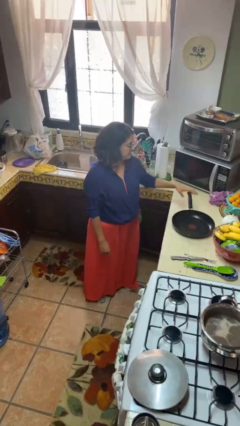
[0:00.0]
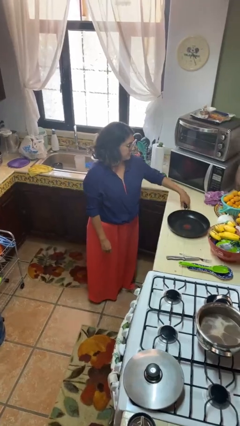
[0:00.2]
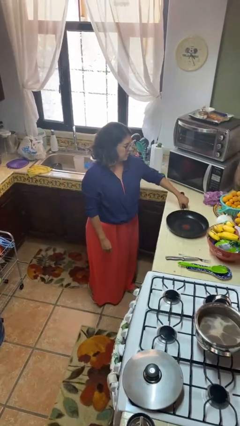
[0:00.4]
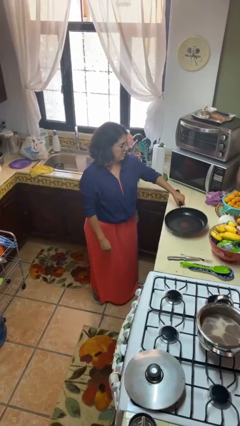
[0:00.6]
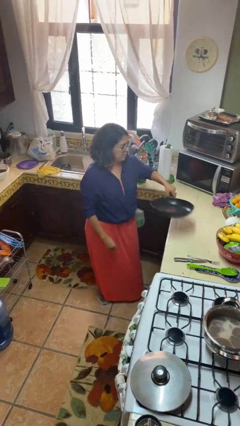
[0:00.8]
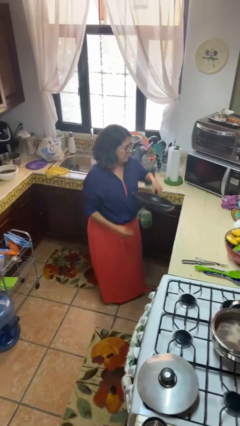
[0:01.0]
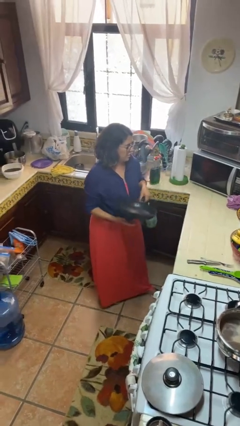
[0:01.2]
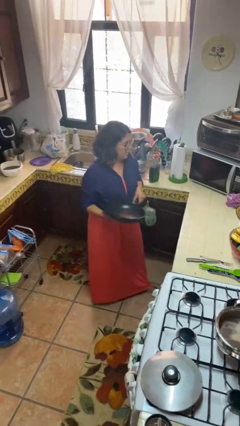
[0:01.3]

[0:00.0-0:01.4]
person picks up object from countertop

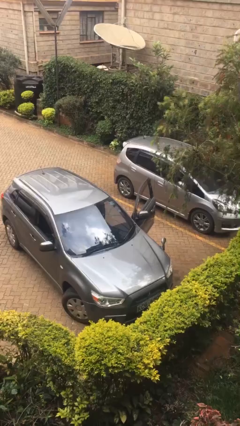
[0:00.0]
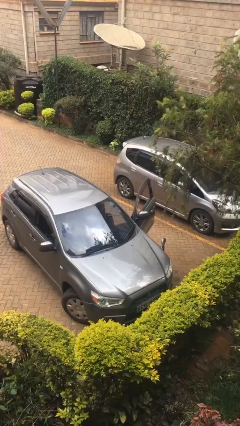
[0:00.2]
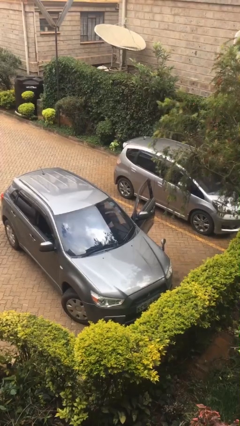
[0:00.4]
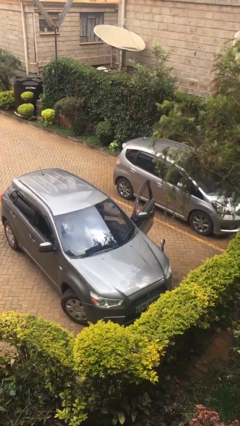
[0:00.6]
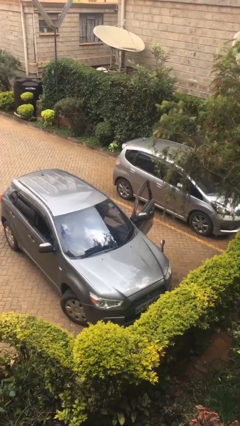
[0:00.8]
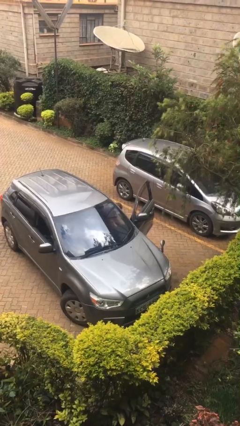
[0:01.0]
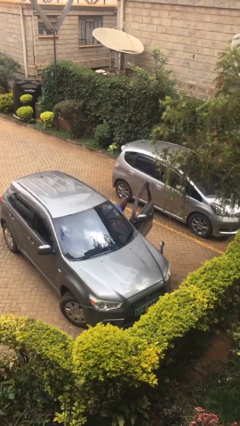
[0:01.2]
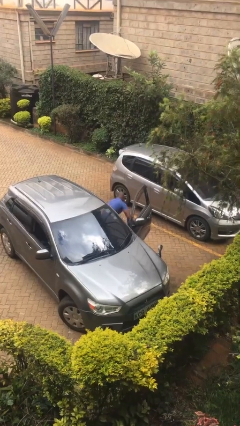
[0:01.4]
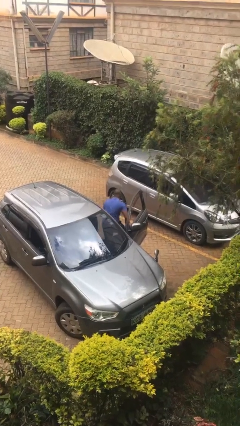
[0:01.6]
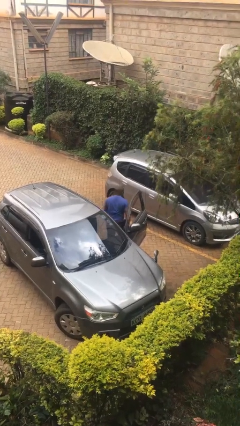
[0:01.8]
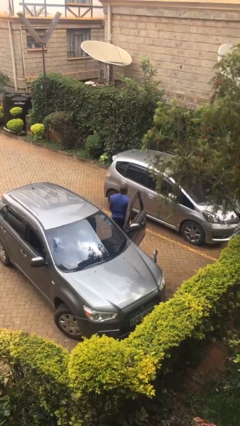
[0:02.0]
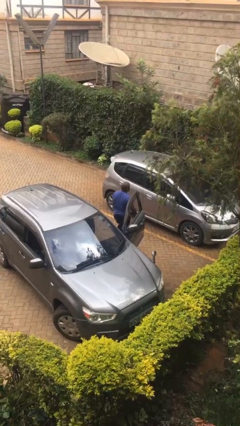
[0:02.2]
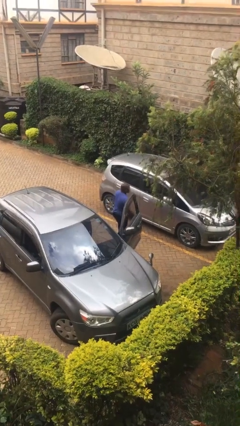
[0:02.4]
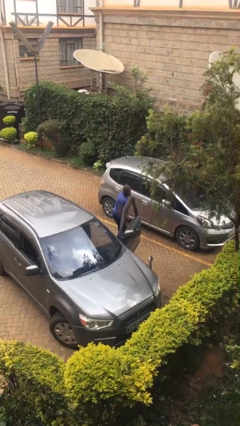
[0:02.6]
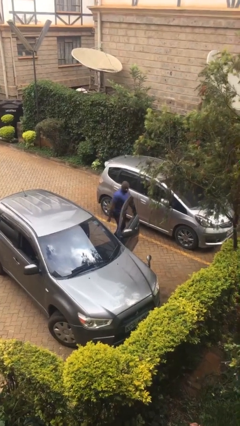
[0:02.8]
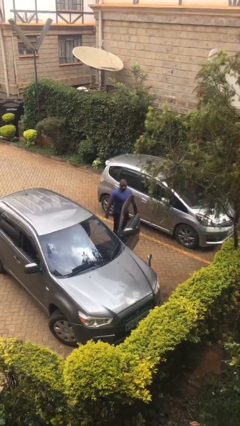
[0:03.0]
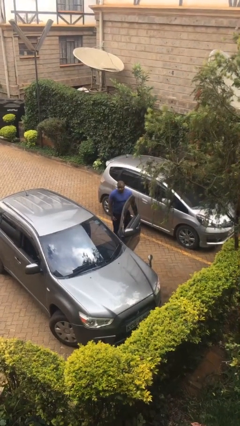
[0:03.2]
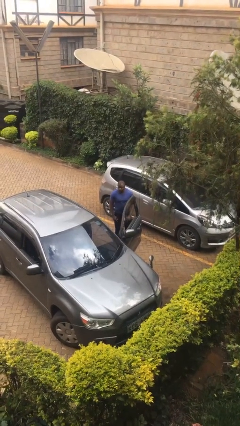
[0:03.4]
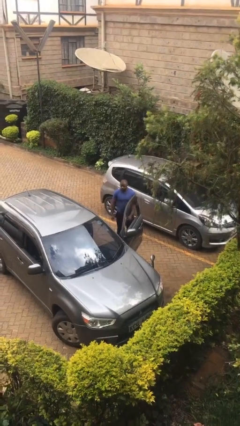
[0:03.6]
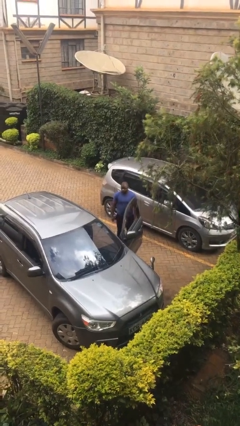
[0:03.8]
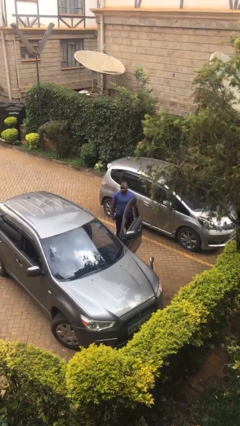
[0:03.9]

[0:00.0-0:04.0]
person exits car

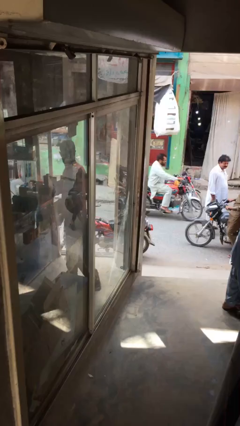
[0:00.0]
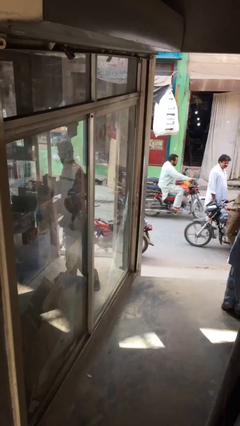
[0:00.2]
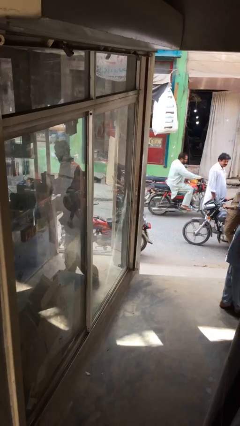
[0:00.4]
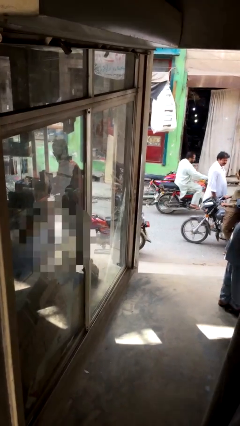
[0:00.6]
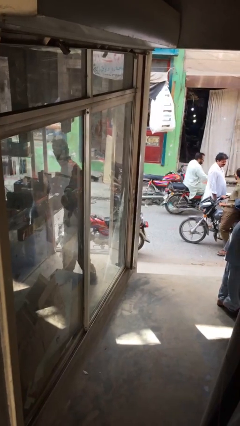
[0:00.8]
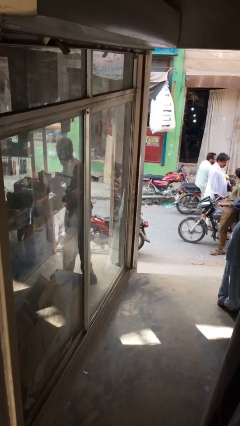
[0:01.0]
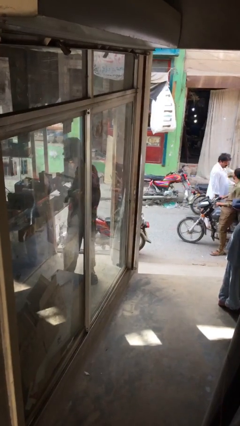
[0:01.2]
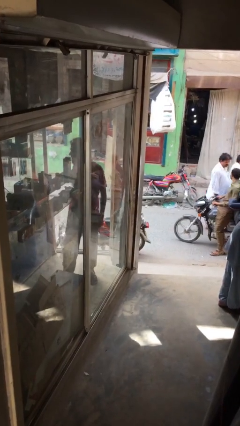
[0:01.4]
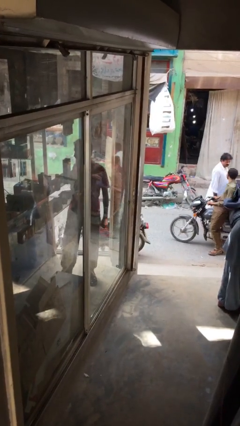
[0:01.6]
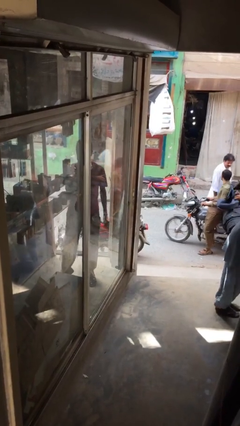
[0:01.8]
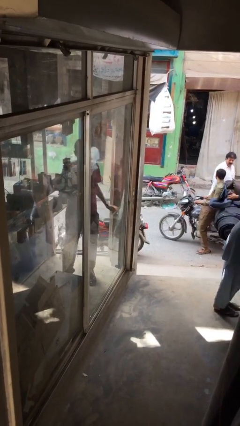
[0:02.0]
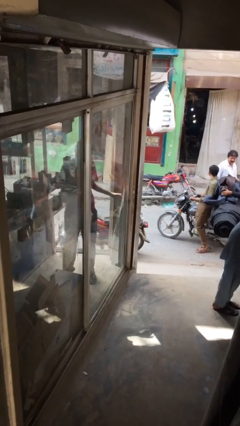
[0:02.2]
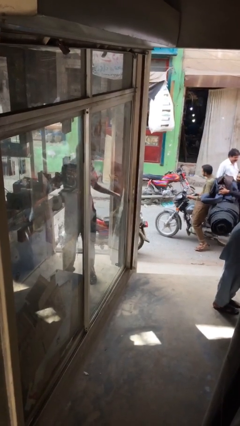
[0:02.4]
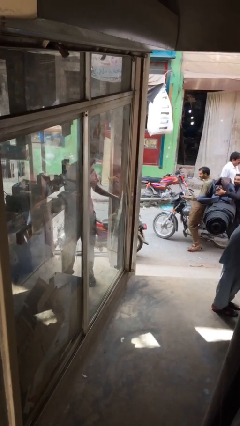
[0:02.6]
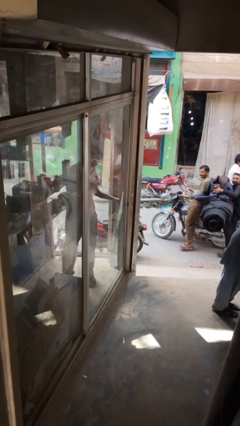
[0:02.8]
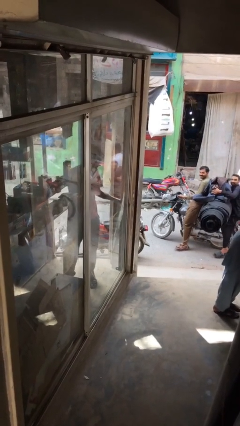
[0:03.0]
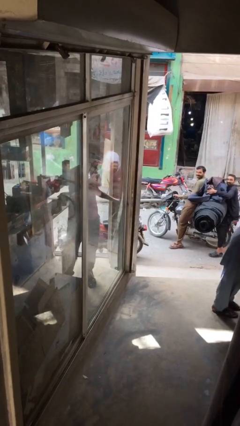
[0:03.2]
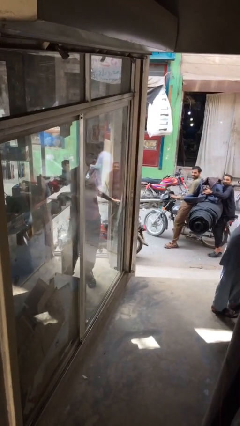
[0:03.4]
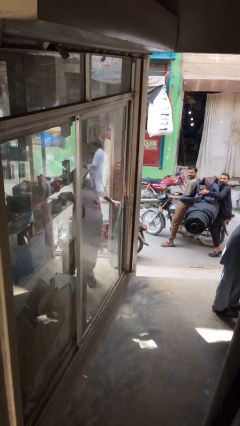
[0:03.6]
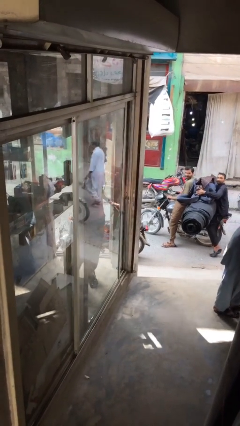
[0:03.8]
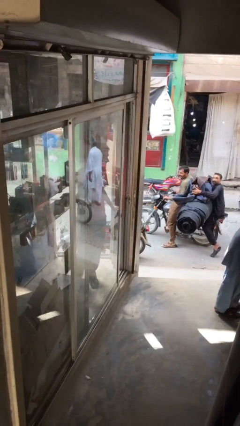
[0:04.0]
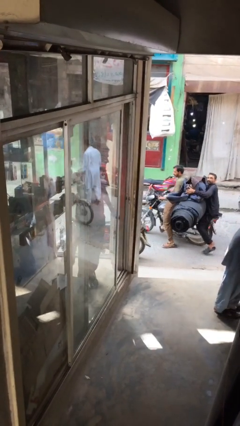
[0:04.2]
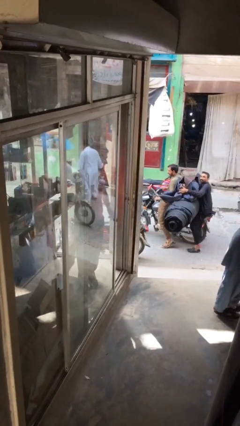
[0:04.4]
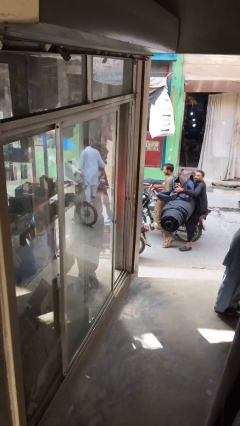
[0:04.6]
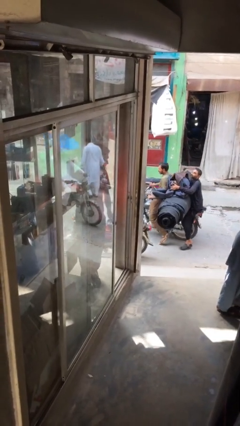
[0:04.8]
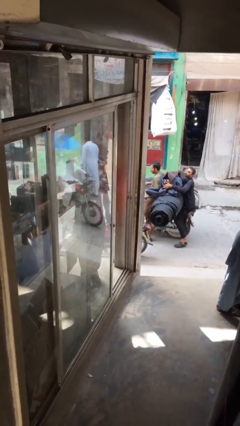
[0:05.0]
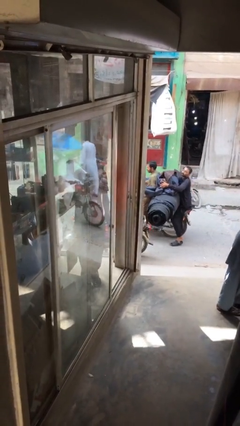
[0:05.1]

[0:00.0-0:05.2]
person opens facility door

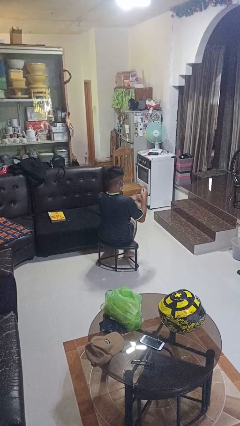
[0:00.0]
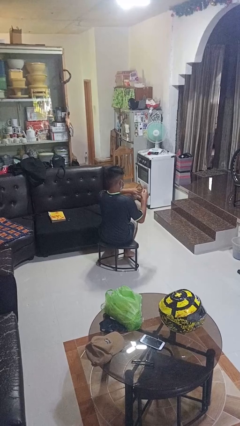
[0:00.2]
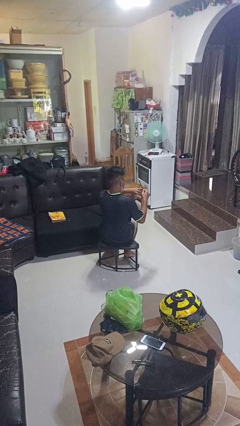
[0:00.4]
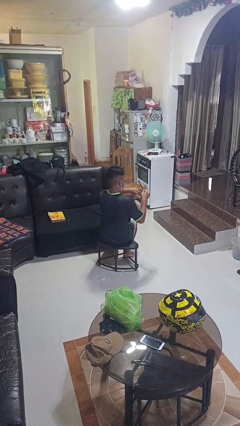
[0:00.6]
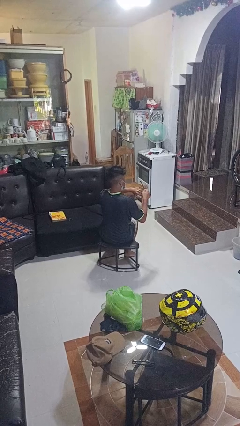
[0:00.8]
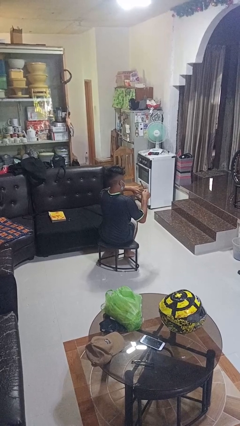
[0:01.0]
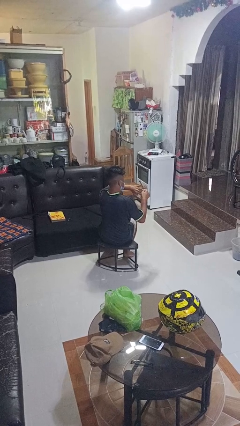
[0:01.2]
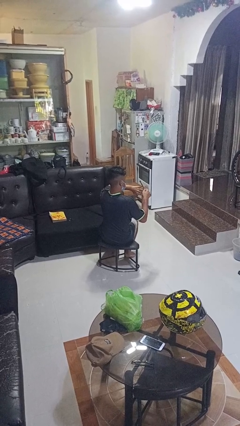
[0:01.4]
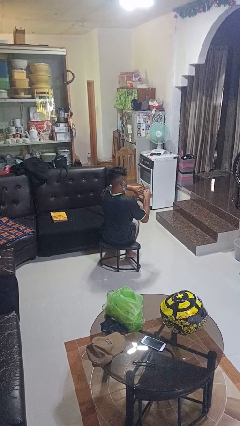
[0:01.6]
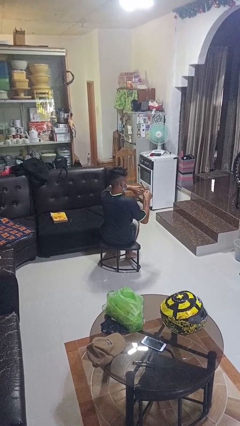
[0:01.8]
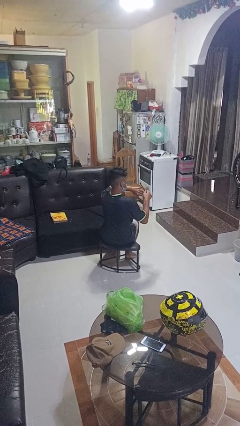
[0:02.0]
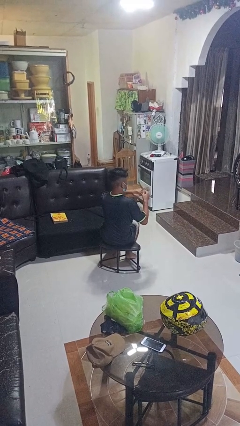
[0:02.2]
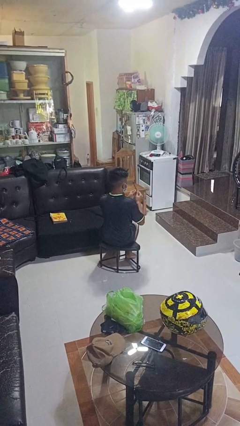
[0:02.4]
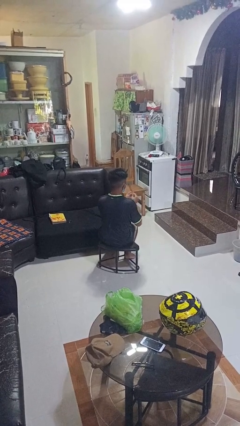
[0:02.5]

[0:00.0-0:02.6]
person files fingernails

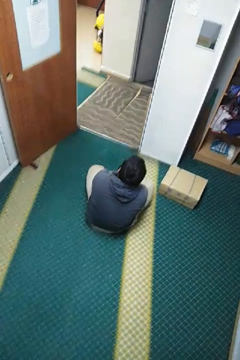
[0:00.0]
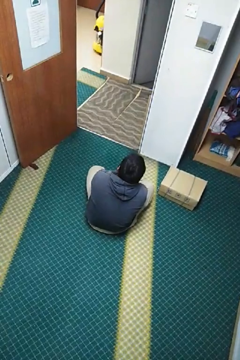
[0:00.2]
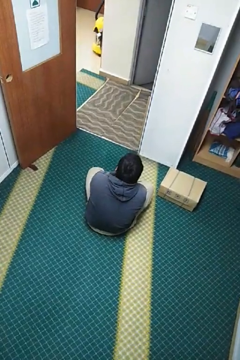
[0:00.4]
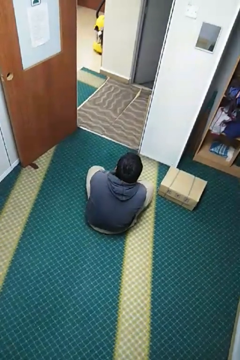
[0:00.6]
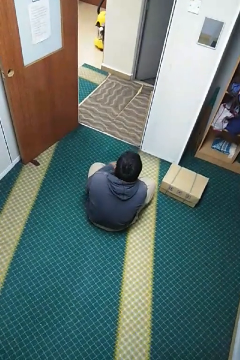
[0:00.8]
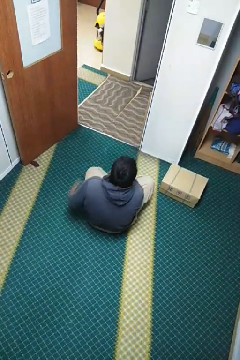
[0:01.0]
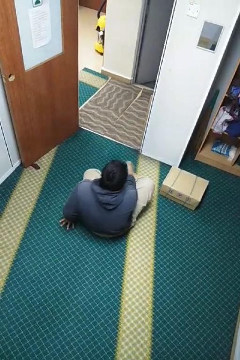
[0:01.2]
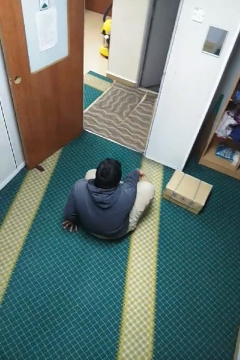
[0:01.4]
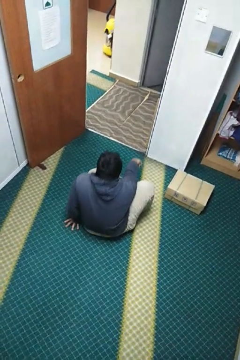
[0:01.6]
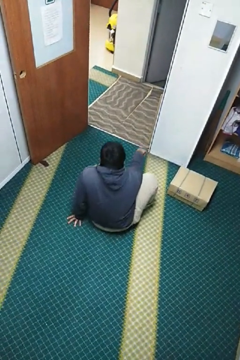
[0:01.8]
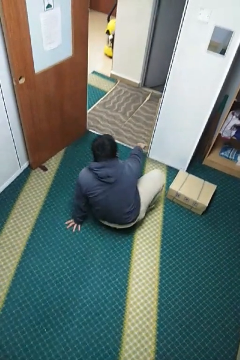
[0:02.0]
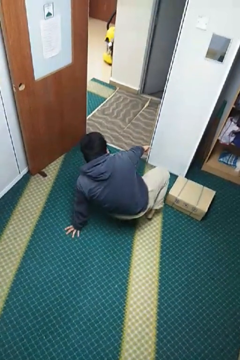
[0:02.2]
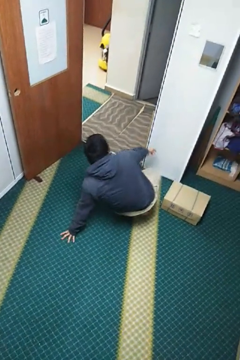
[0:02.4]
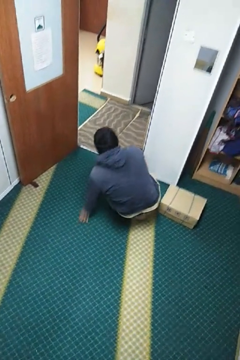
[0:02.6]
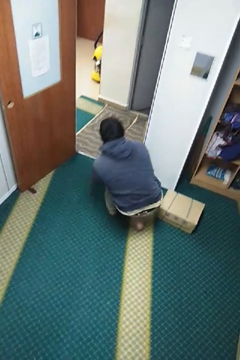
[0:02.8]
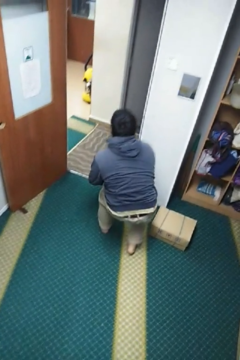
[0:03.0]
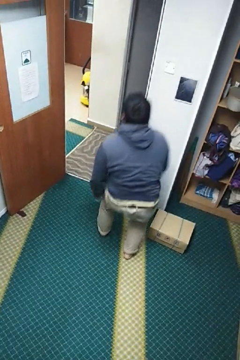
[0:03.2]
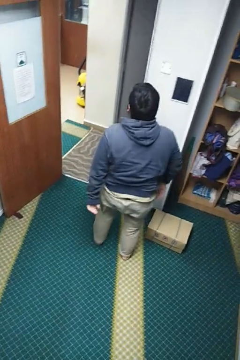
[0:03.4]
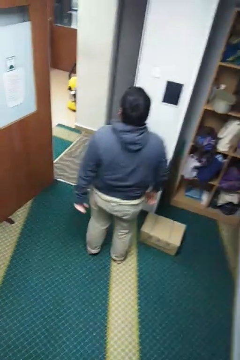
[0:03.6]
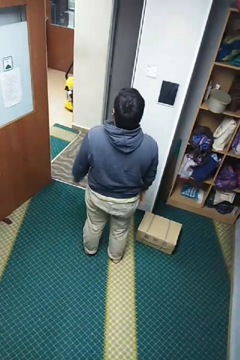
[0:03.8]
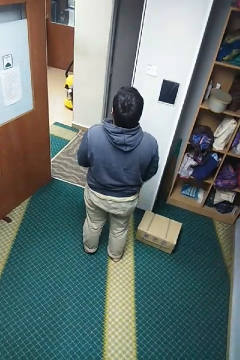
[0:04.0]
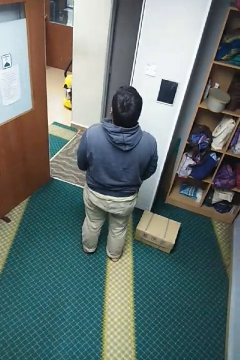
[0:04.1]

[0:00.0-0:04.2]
person stands up from floor

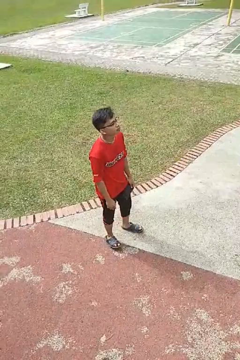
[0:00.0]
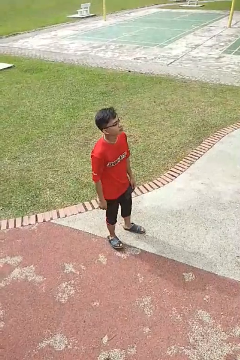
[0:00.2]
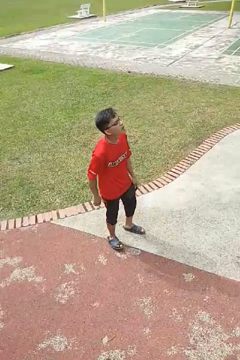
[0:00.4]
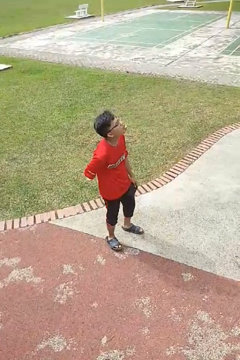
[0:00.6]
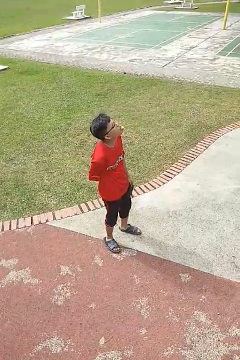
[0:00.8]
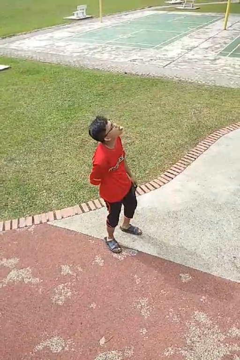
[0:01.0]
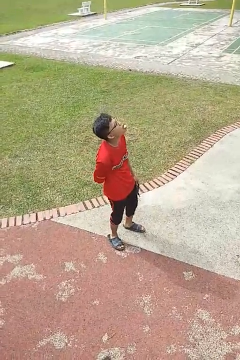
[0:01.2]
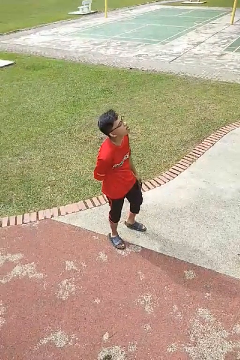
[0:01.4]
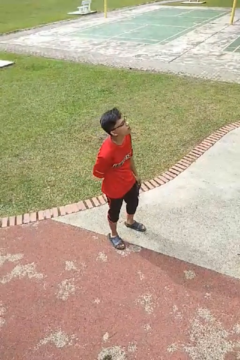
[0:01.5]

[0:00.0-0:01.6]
person sticks out tongue
